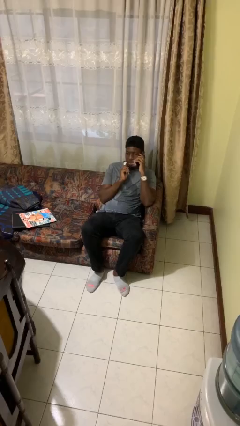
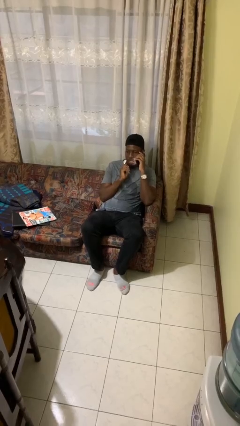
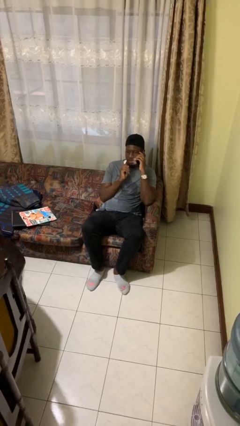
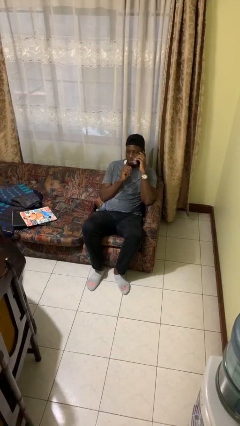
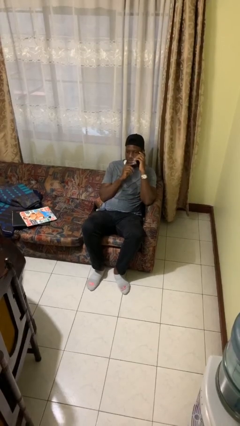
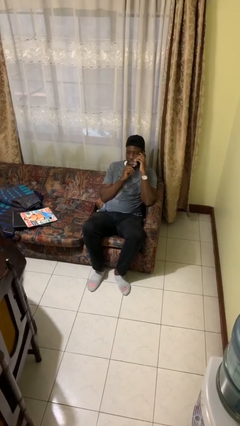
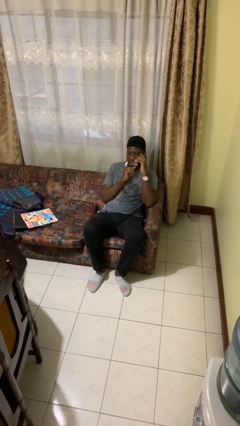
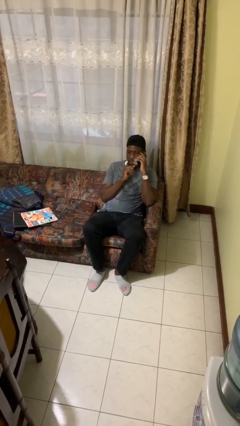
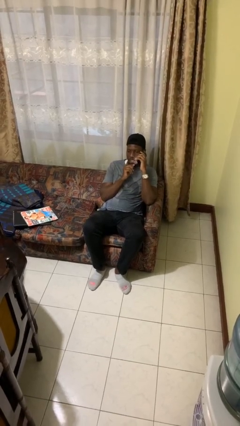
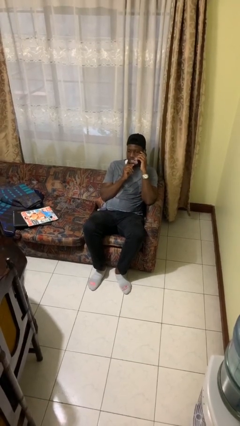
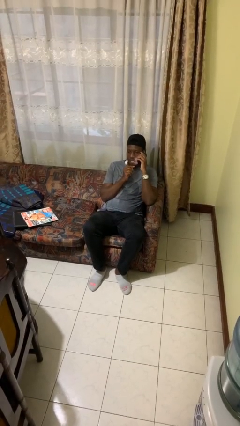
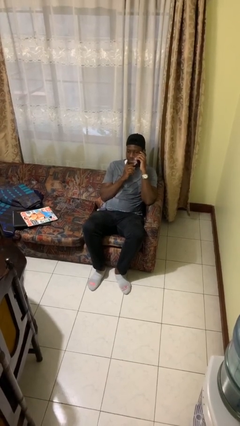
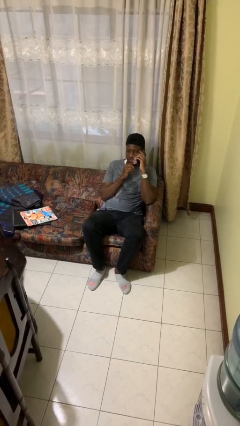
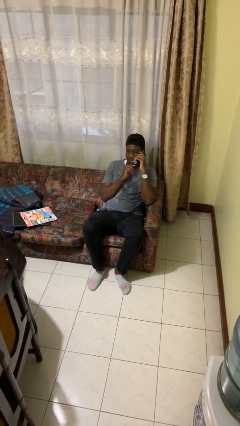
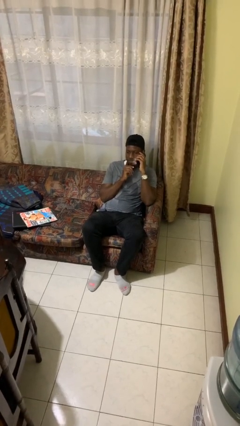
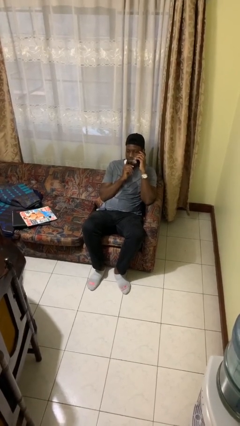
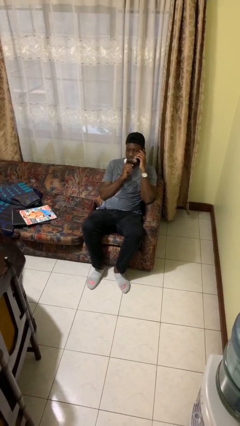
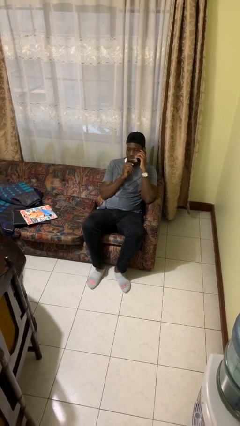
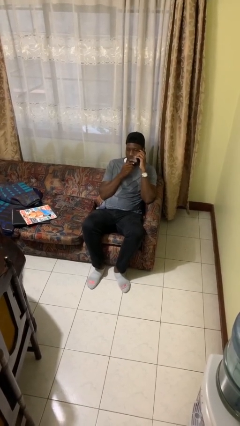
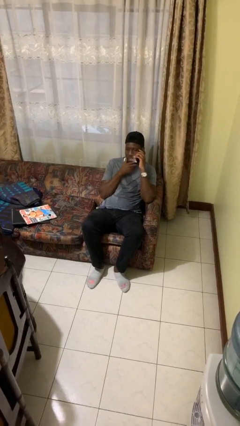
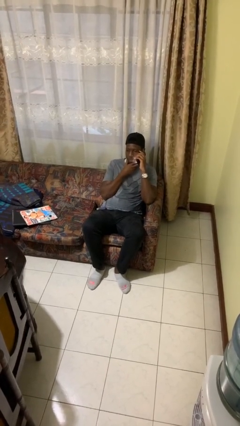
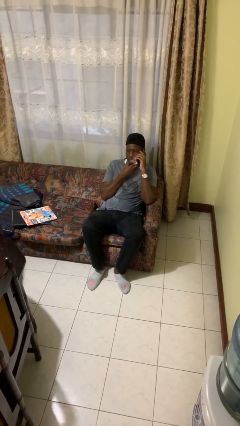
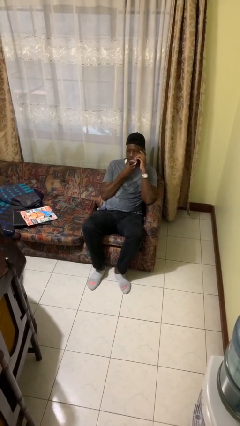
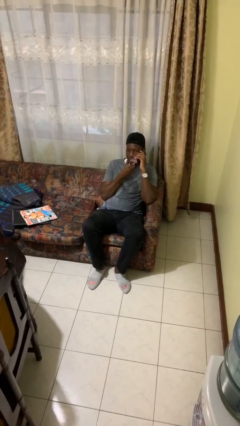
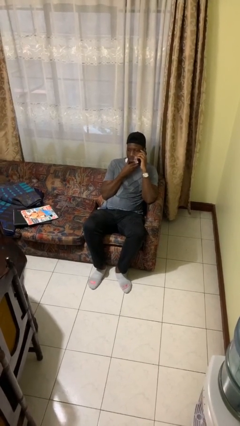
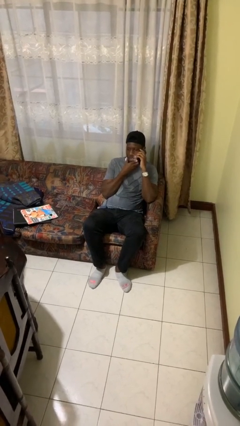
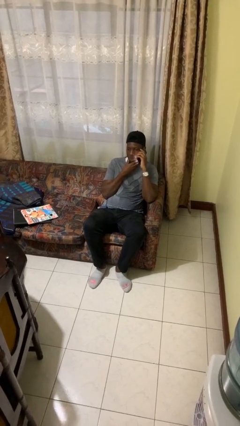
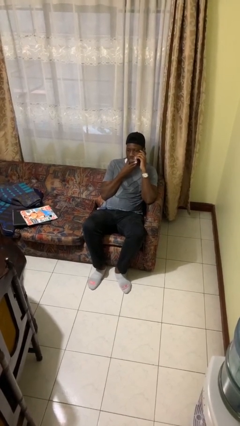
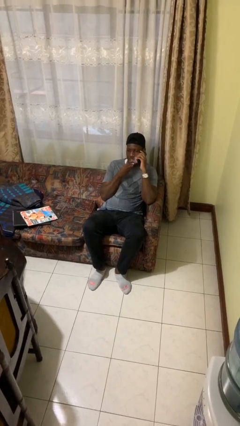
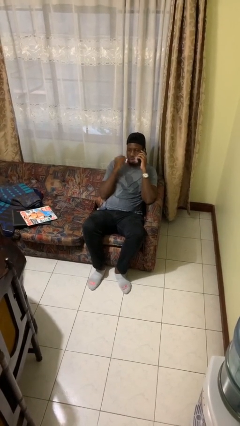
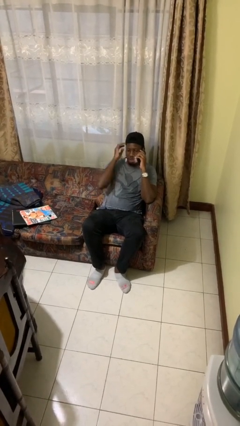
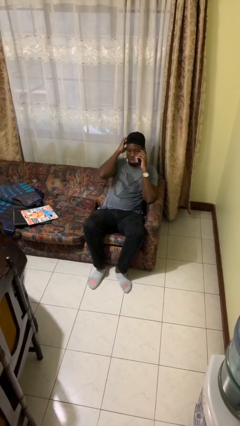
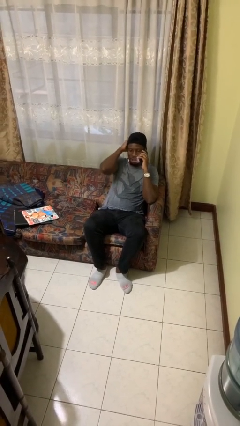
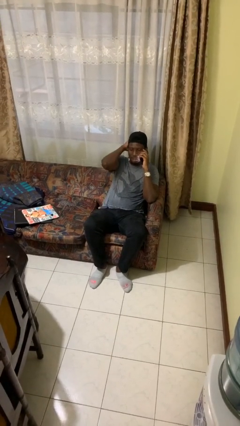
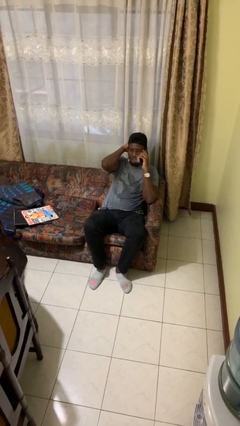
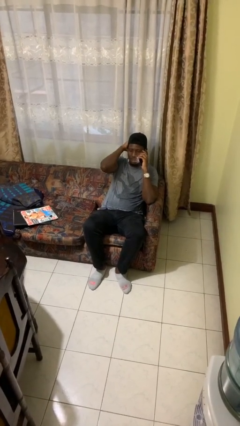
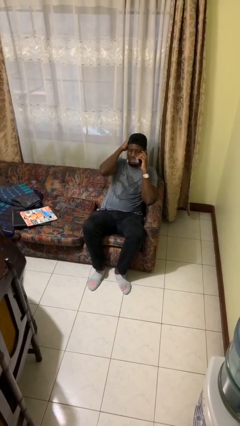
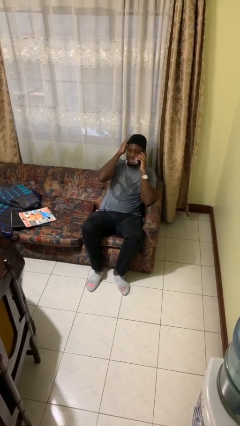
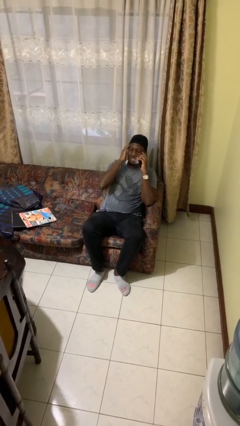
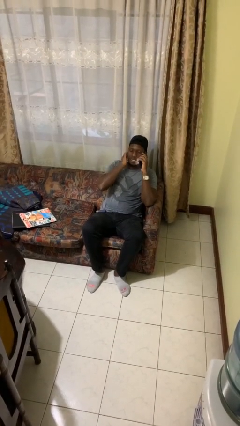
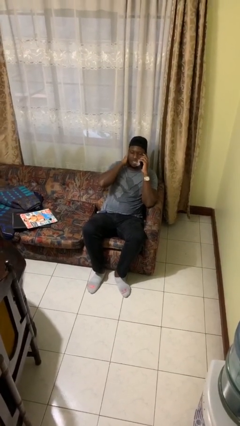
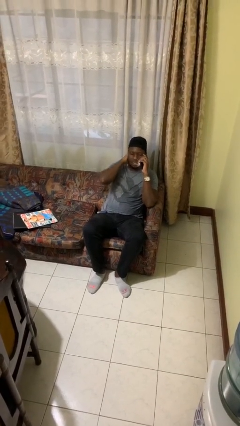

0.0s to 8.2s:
person talks on phone

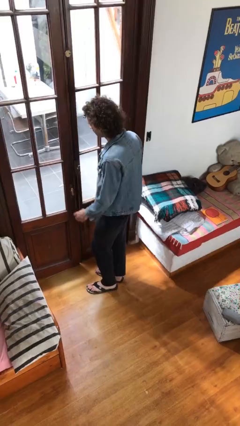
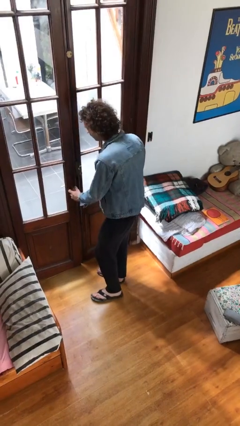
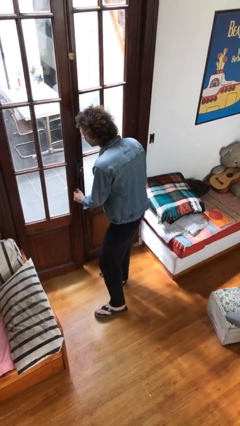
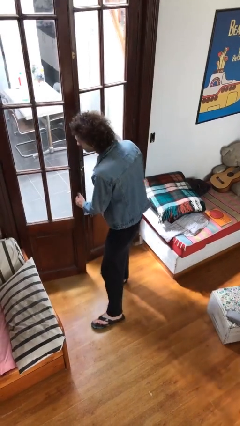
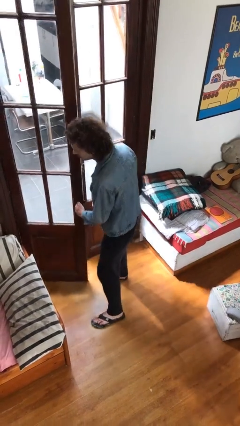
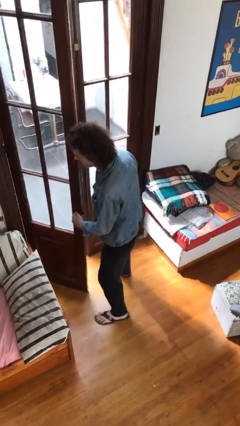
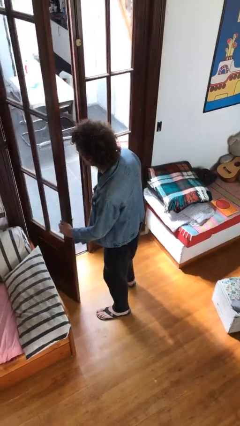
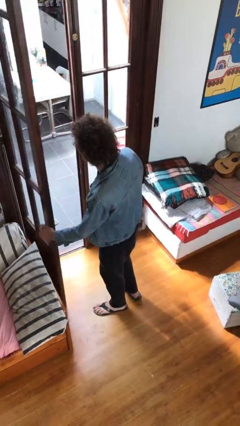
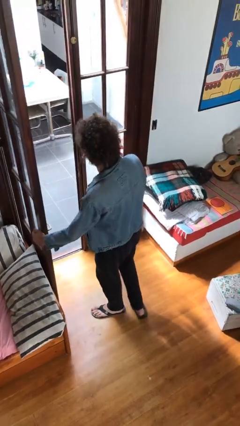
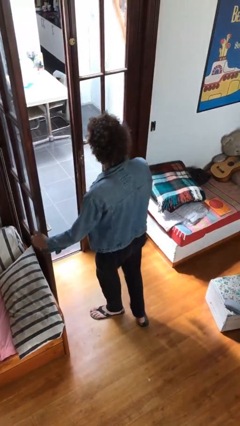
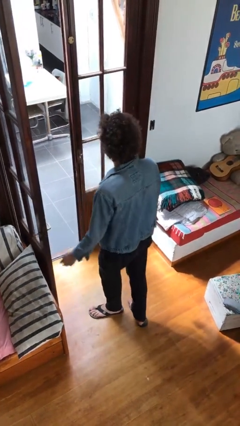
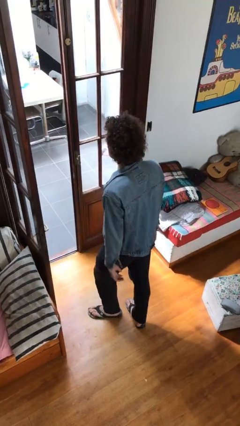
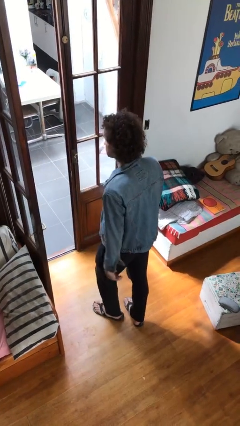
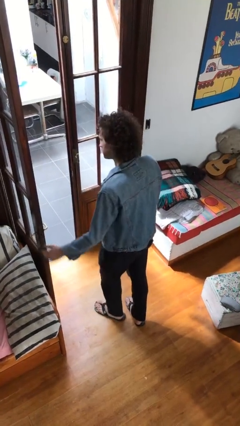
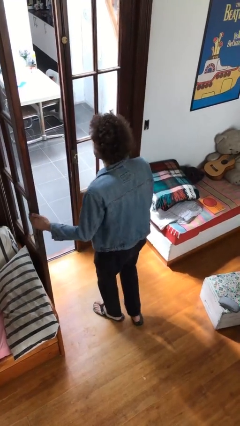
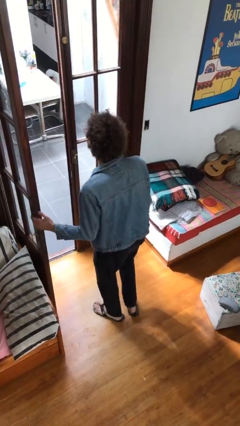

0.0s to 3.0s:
person opens facility door

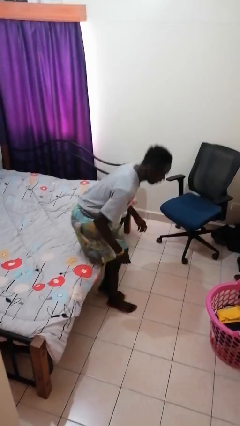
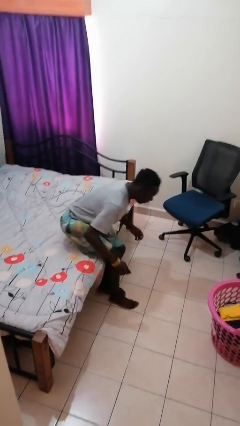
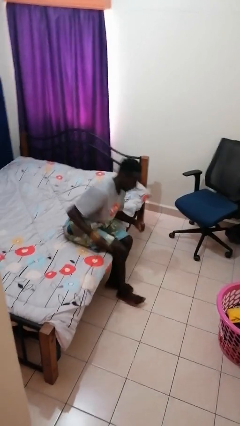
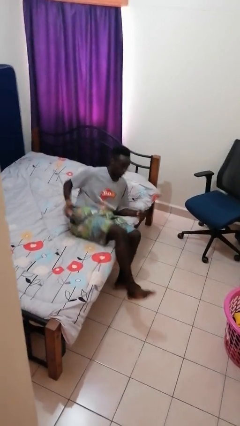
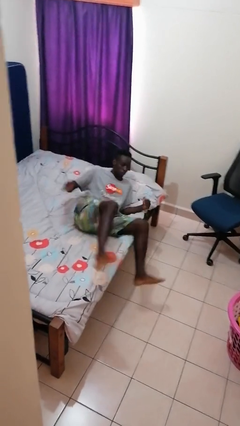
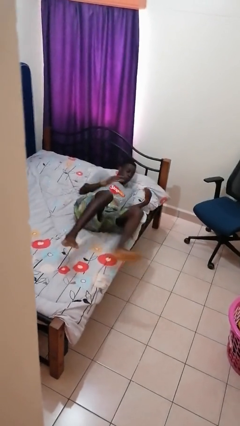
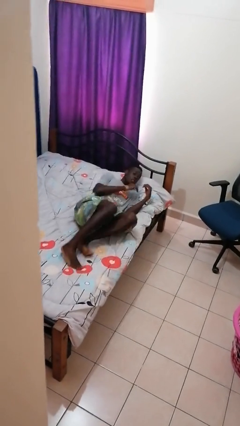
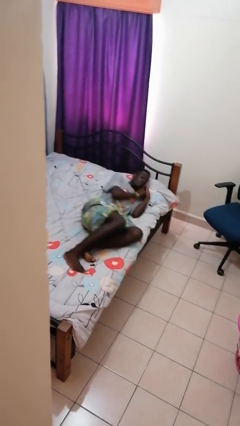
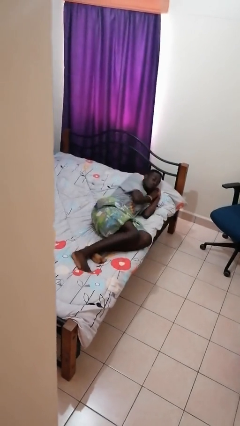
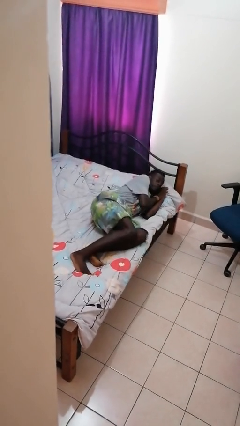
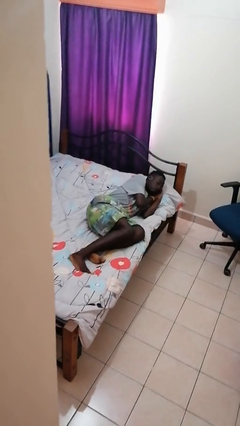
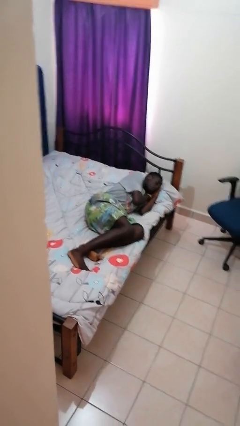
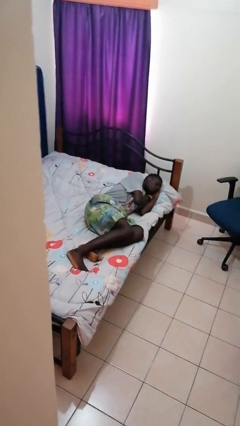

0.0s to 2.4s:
person lies down on bed

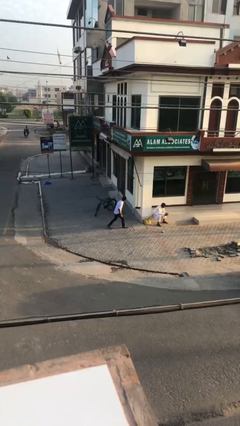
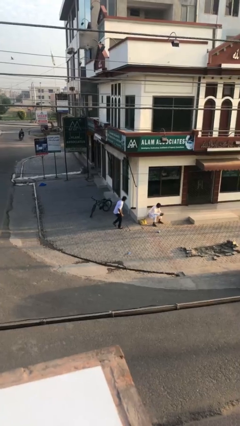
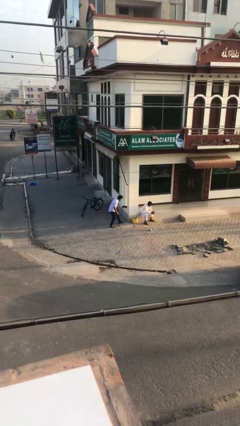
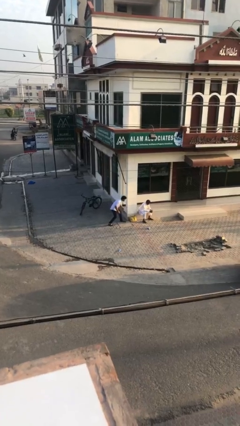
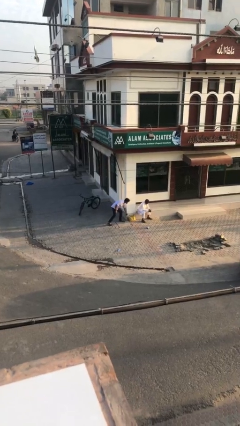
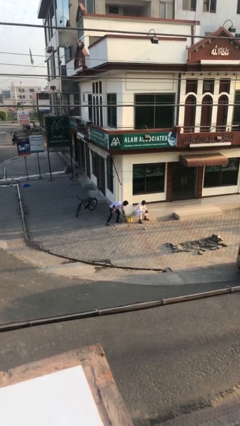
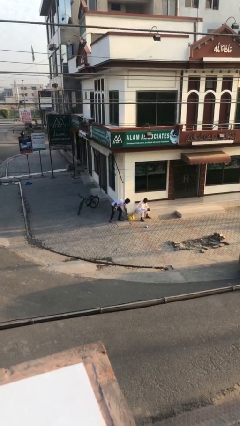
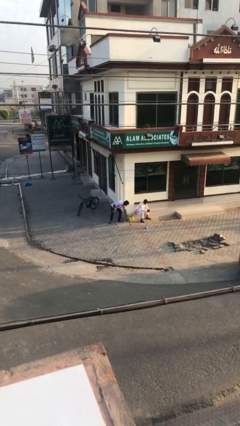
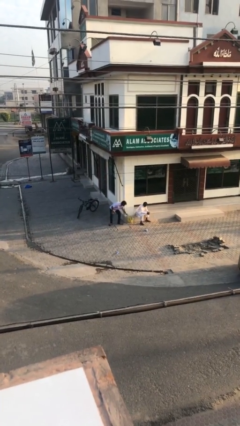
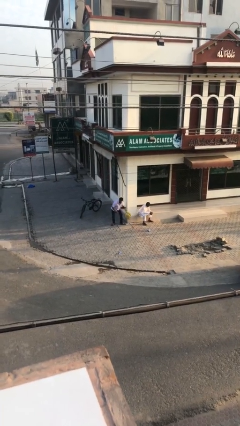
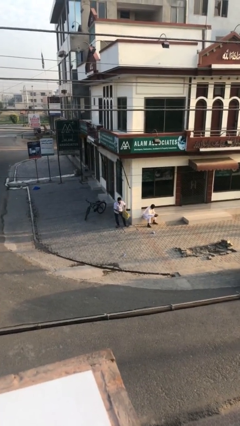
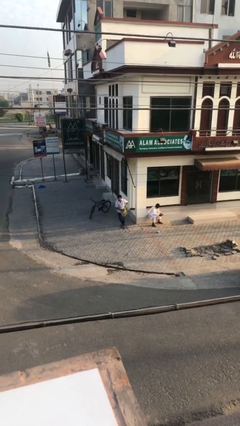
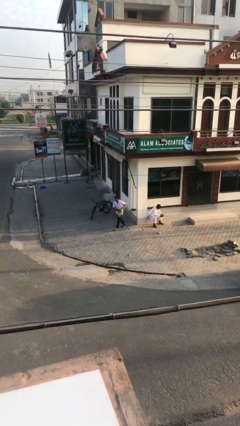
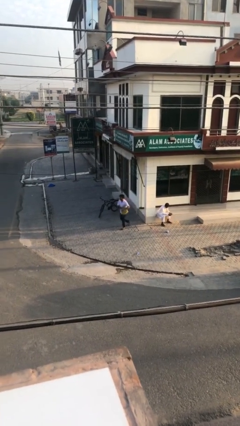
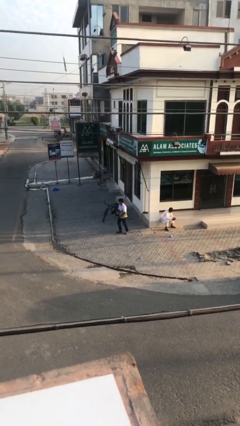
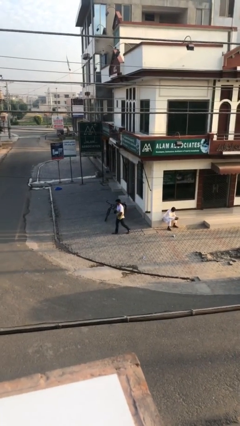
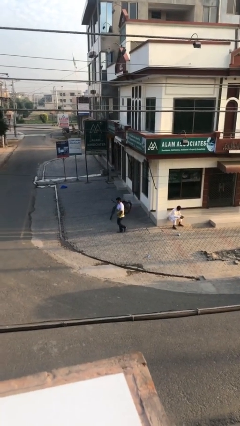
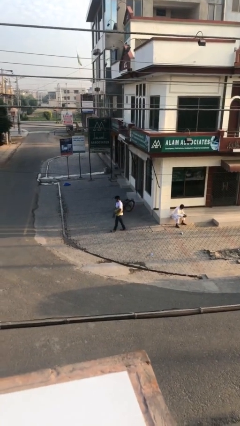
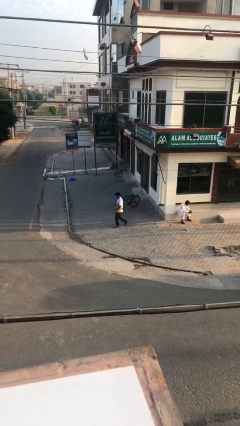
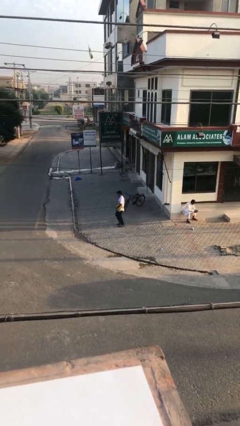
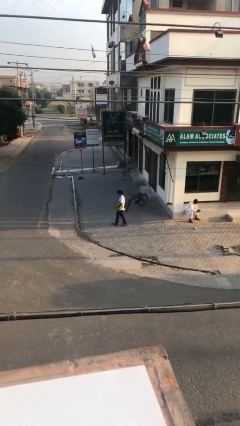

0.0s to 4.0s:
person steals object from person
